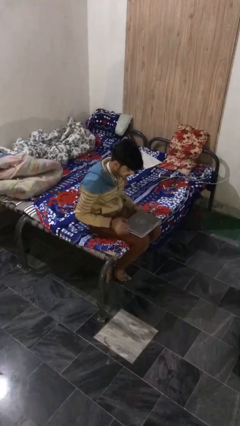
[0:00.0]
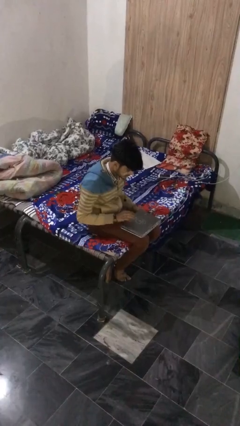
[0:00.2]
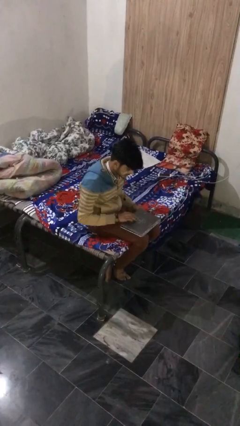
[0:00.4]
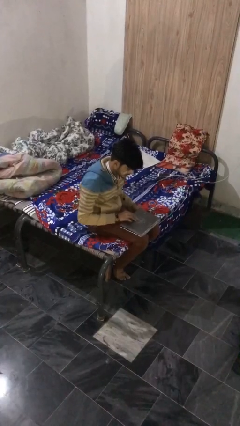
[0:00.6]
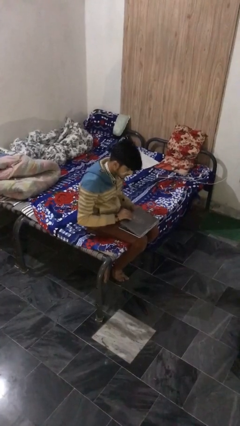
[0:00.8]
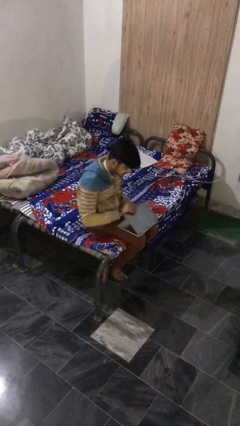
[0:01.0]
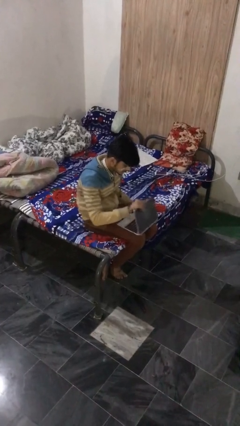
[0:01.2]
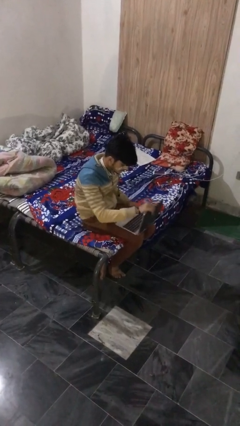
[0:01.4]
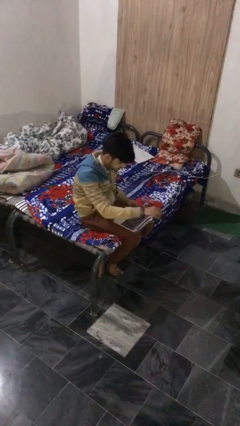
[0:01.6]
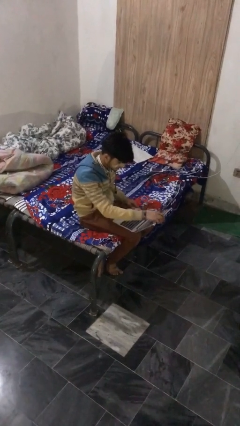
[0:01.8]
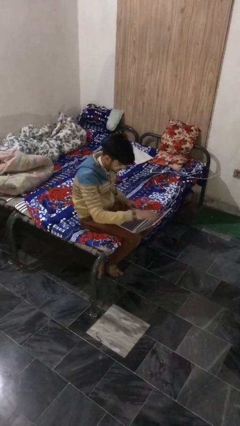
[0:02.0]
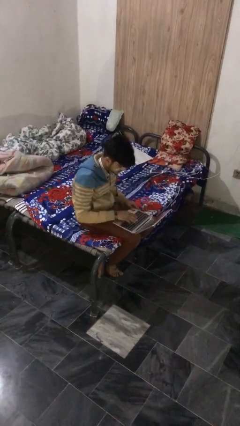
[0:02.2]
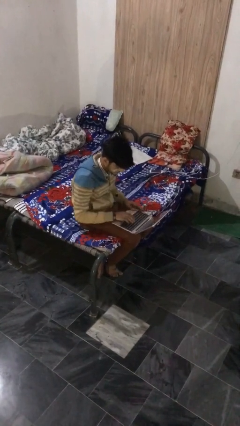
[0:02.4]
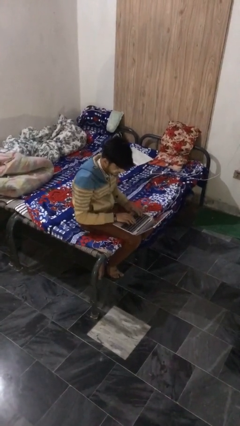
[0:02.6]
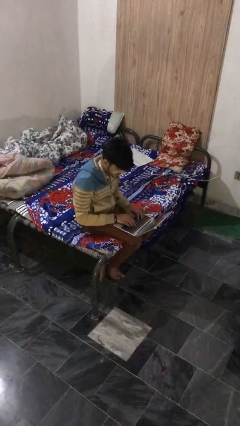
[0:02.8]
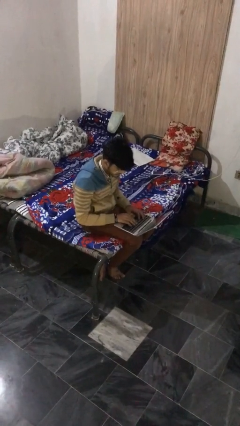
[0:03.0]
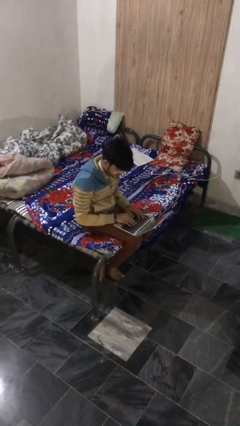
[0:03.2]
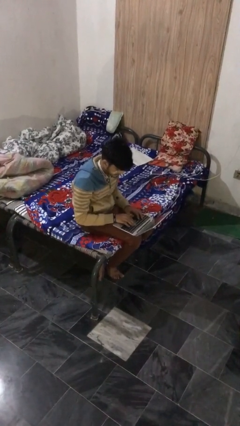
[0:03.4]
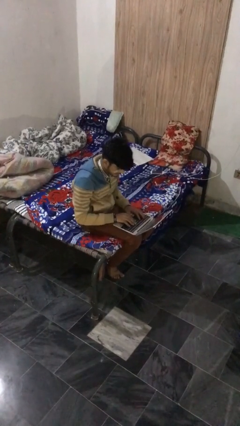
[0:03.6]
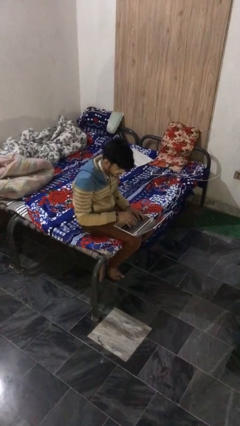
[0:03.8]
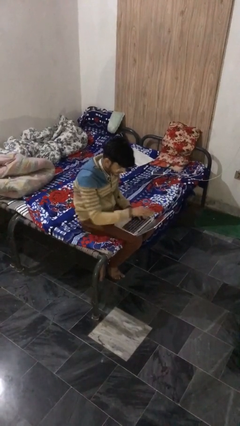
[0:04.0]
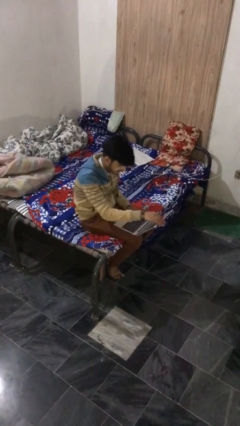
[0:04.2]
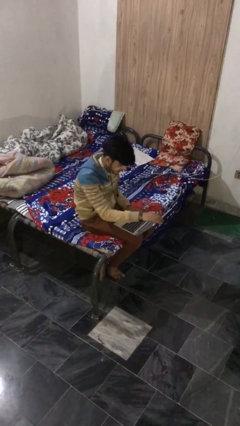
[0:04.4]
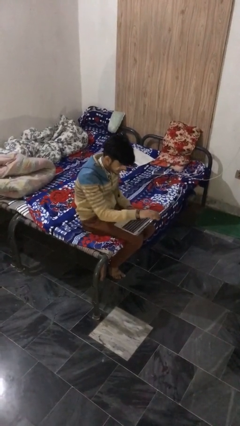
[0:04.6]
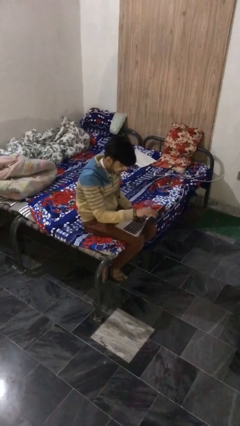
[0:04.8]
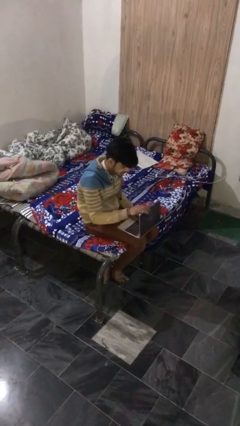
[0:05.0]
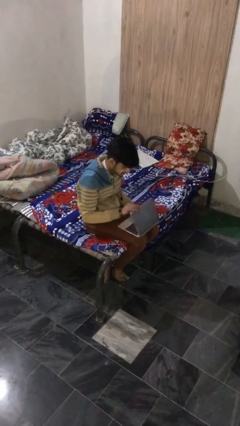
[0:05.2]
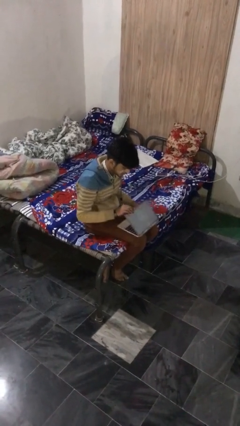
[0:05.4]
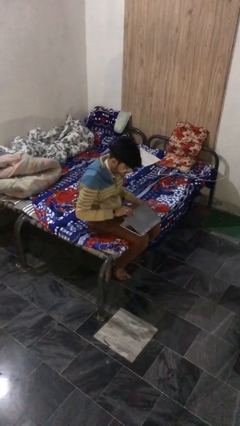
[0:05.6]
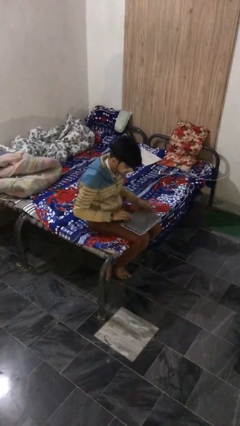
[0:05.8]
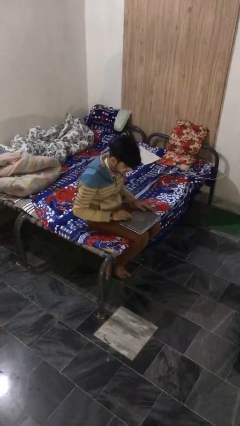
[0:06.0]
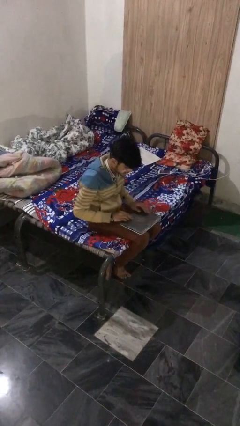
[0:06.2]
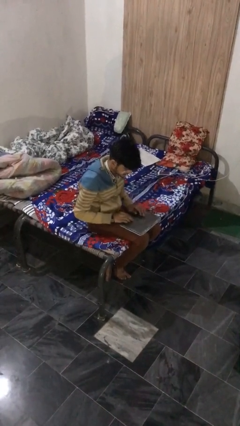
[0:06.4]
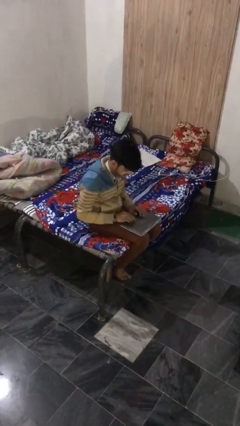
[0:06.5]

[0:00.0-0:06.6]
person interacts with laptop

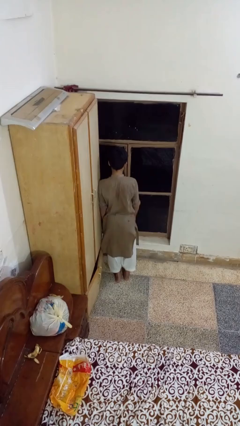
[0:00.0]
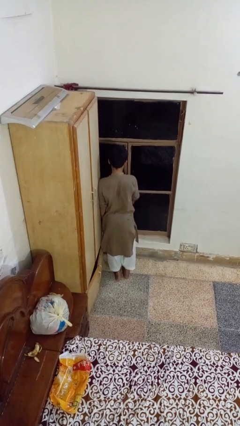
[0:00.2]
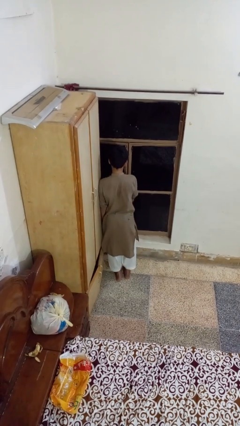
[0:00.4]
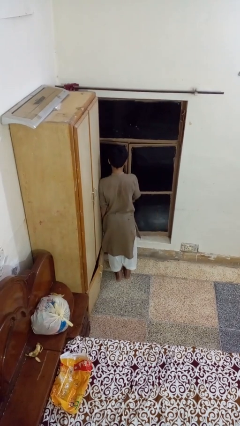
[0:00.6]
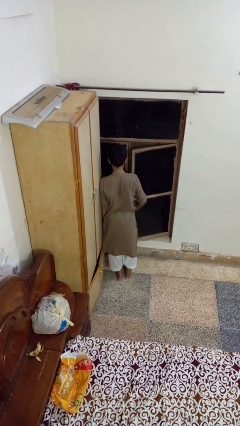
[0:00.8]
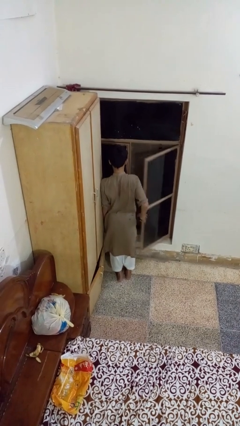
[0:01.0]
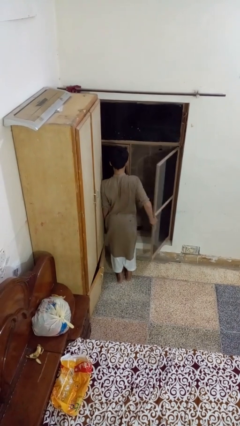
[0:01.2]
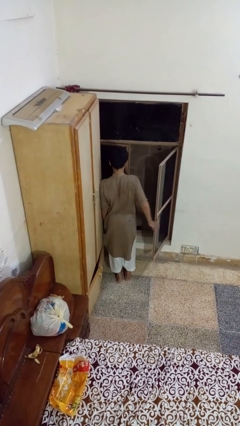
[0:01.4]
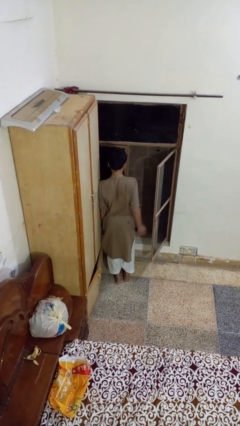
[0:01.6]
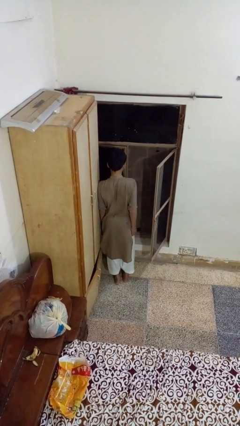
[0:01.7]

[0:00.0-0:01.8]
person opens home window

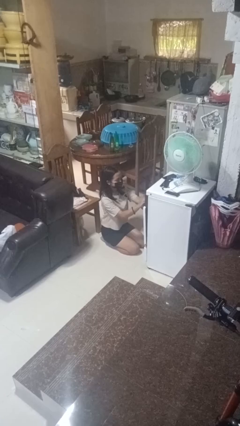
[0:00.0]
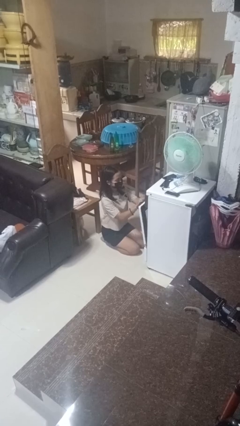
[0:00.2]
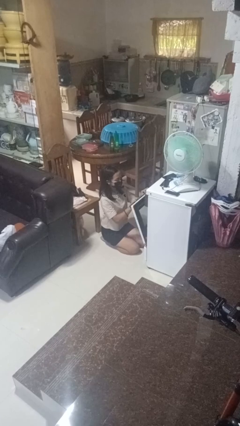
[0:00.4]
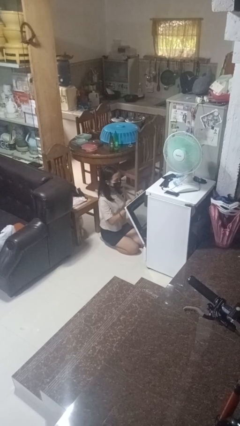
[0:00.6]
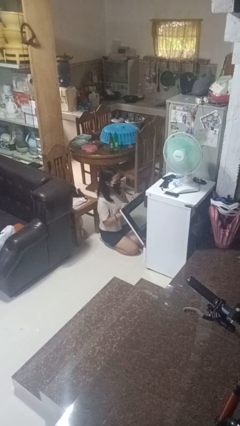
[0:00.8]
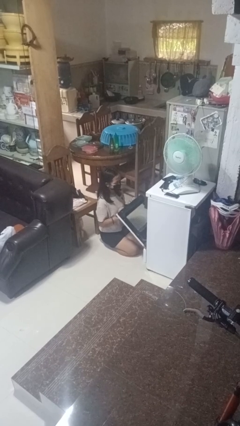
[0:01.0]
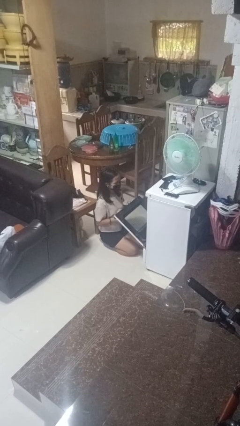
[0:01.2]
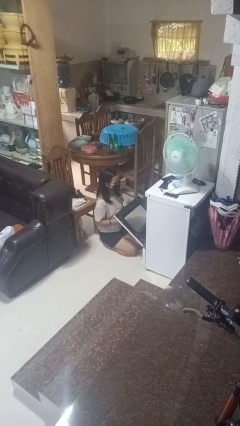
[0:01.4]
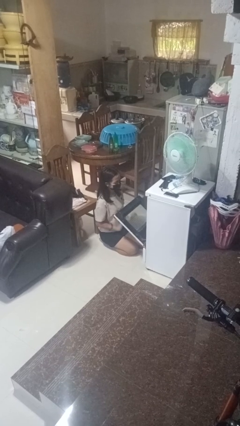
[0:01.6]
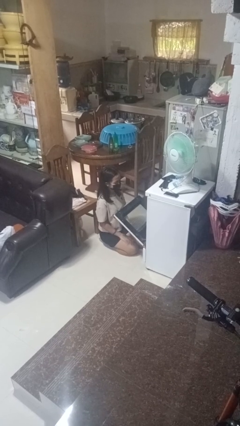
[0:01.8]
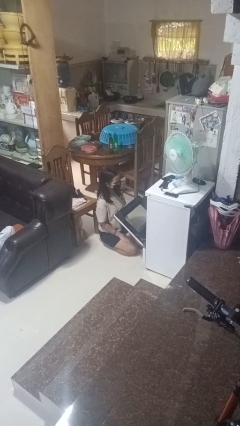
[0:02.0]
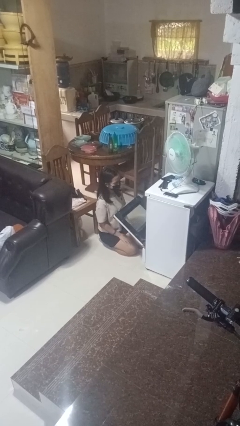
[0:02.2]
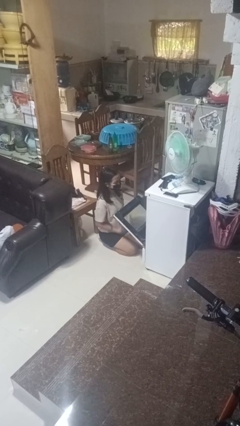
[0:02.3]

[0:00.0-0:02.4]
person opens oven door

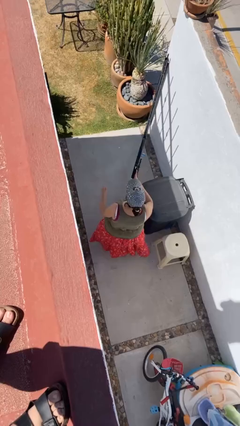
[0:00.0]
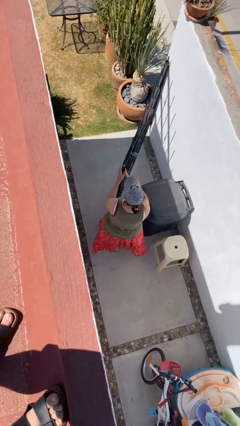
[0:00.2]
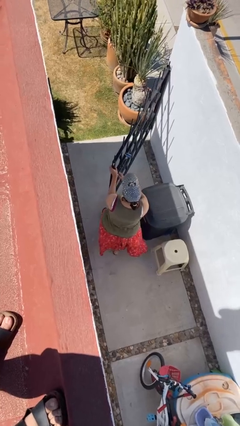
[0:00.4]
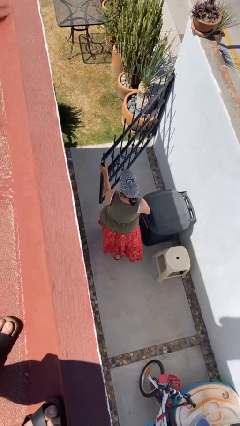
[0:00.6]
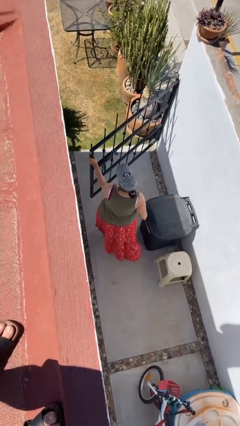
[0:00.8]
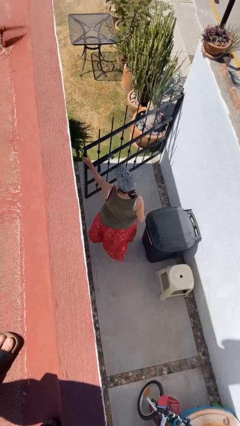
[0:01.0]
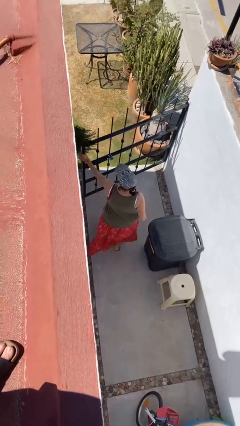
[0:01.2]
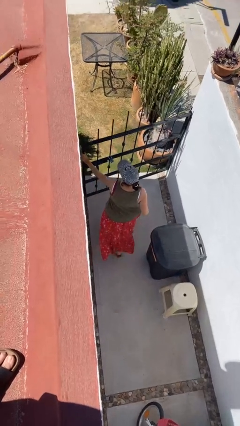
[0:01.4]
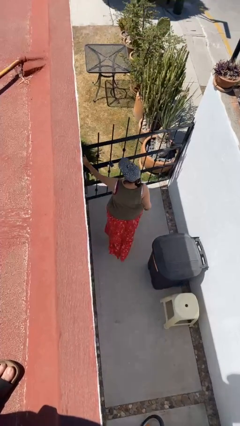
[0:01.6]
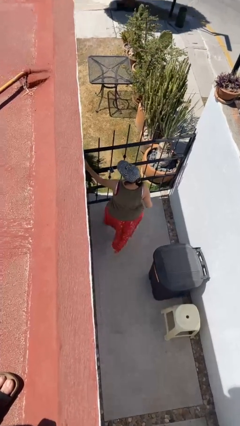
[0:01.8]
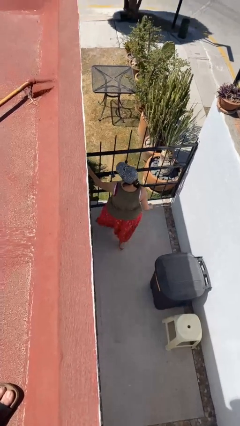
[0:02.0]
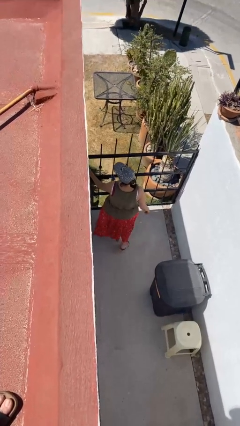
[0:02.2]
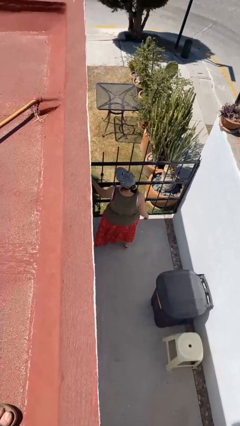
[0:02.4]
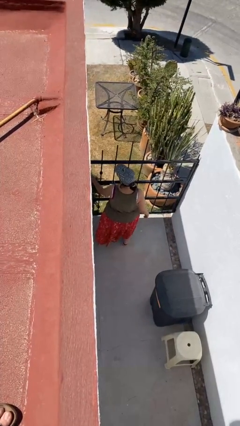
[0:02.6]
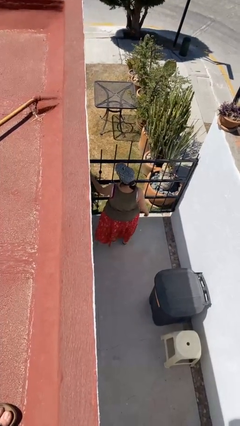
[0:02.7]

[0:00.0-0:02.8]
person closes facility door

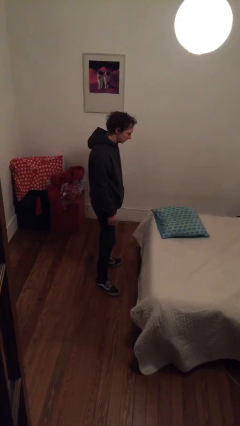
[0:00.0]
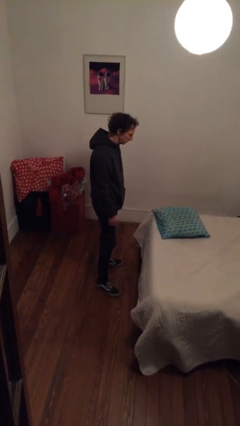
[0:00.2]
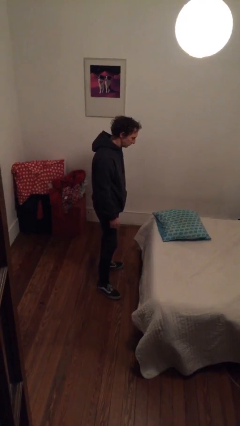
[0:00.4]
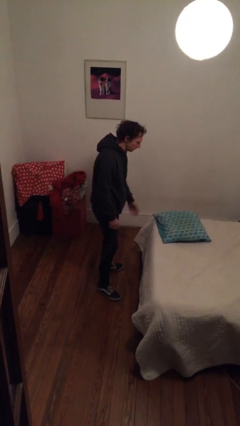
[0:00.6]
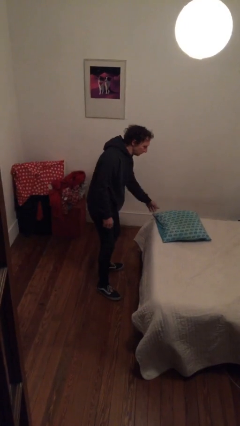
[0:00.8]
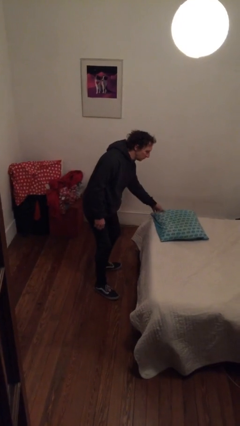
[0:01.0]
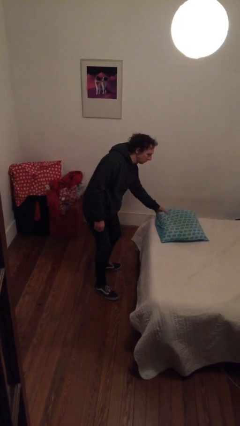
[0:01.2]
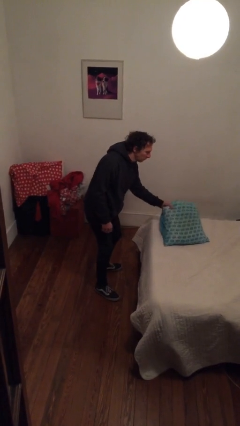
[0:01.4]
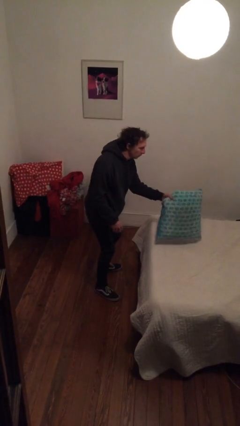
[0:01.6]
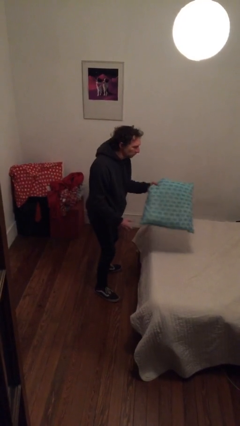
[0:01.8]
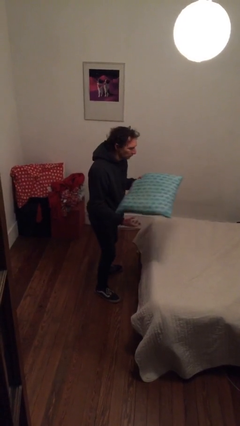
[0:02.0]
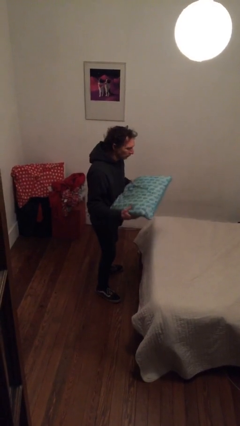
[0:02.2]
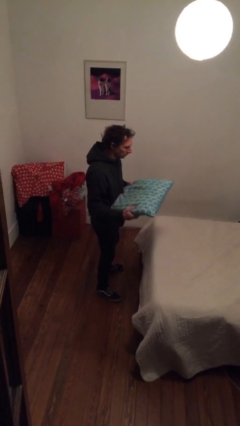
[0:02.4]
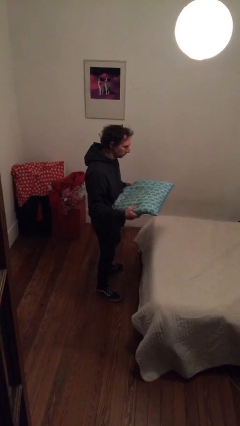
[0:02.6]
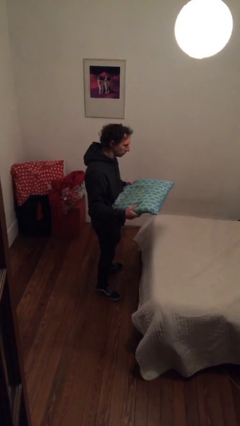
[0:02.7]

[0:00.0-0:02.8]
person picks up object from bed

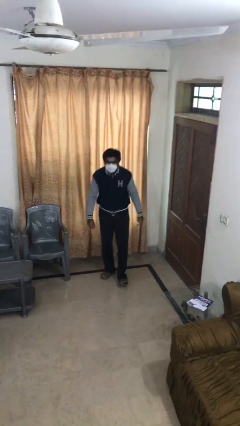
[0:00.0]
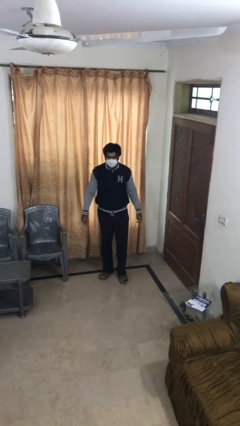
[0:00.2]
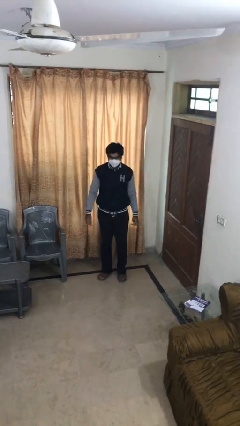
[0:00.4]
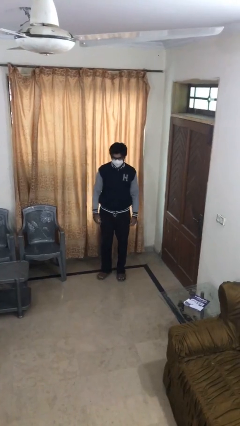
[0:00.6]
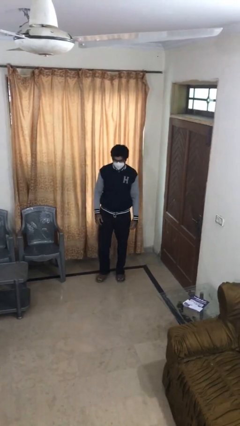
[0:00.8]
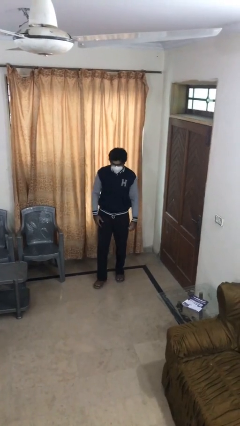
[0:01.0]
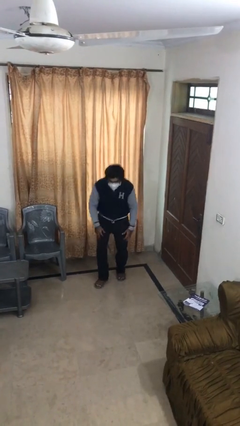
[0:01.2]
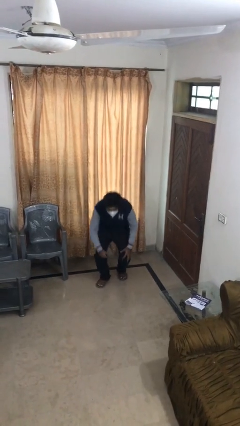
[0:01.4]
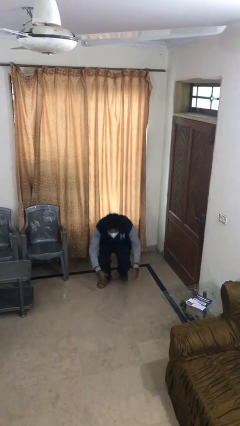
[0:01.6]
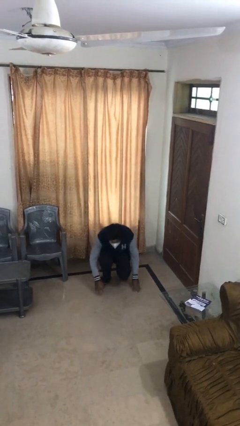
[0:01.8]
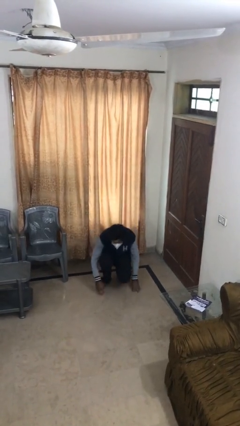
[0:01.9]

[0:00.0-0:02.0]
person sits down
